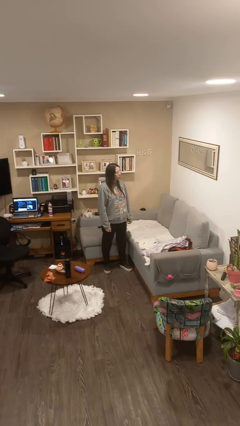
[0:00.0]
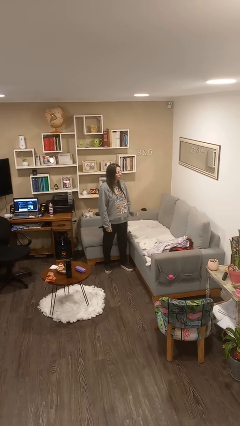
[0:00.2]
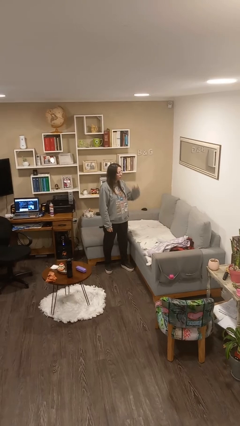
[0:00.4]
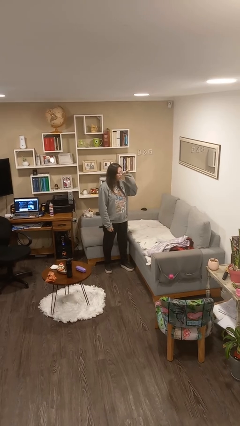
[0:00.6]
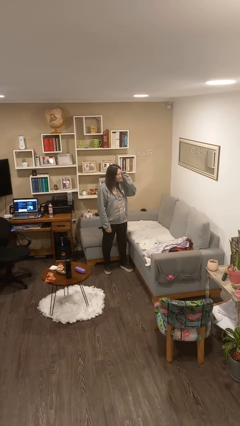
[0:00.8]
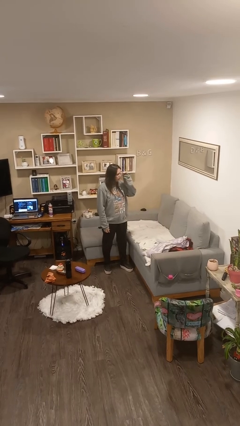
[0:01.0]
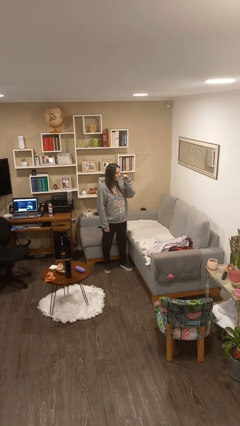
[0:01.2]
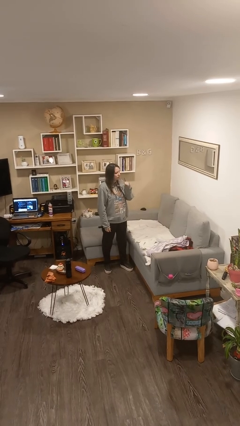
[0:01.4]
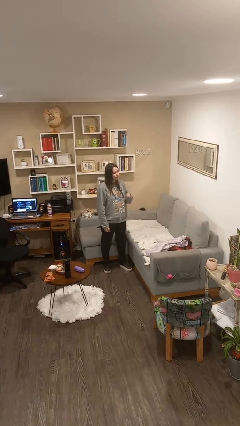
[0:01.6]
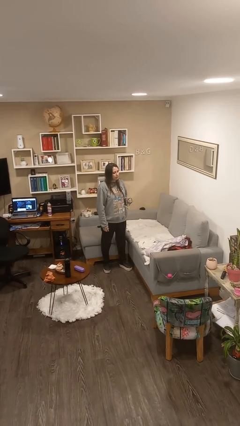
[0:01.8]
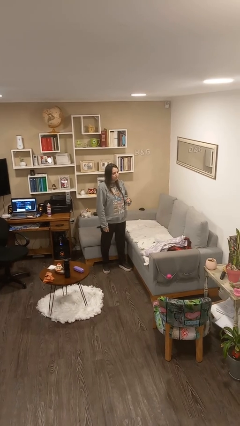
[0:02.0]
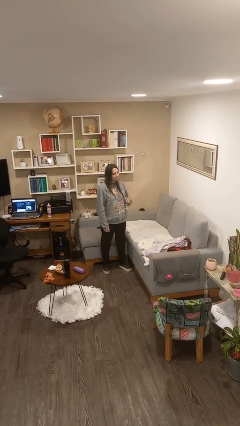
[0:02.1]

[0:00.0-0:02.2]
person takes off glasses

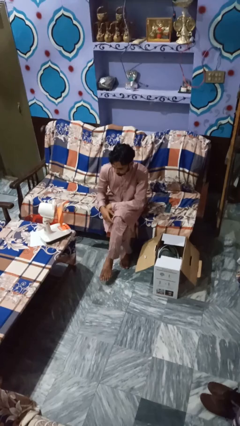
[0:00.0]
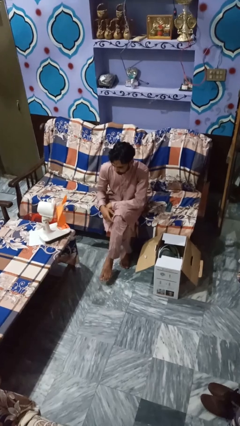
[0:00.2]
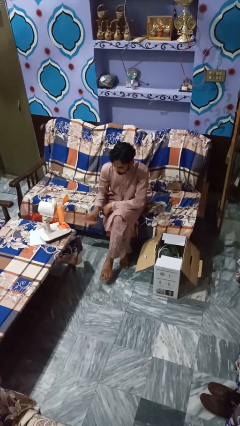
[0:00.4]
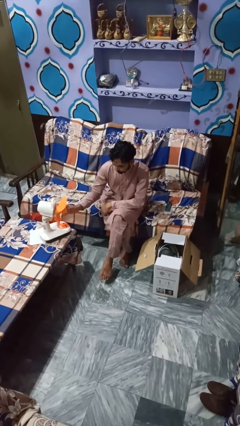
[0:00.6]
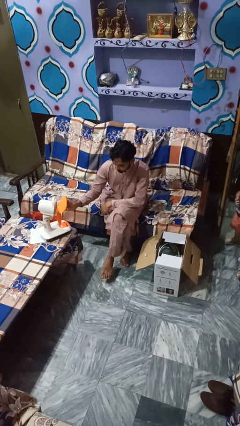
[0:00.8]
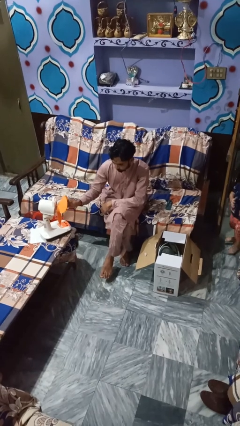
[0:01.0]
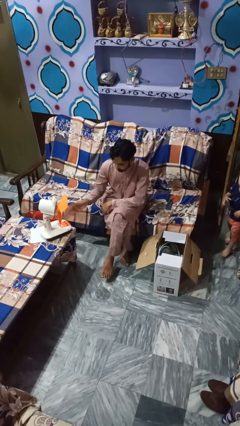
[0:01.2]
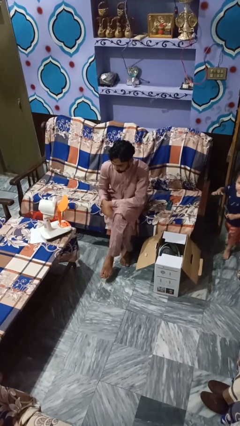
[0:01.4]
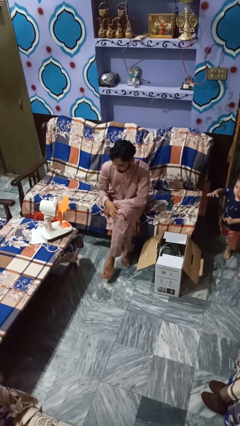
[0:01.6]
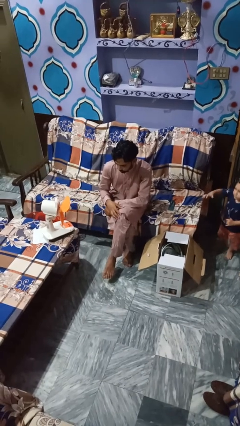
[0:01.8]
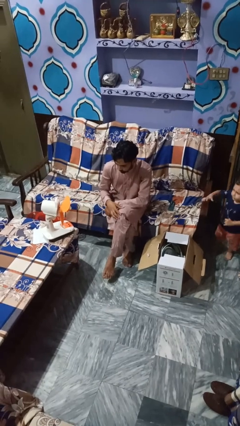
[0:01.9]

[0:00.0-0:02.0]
person turns off fan

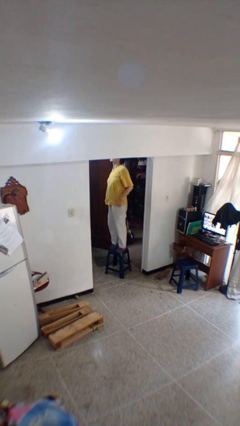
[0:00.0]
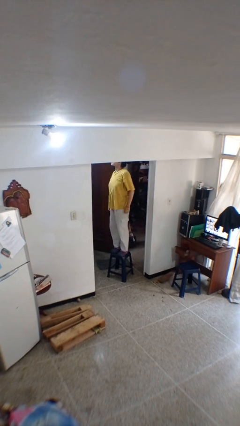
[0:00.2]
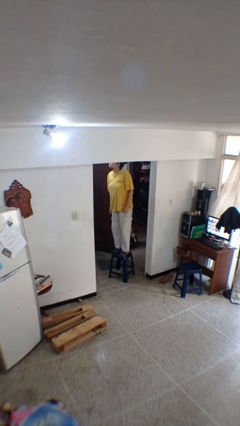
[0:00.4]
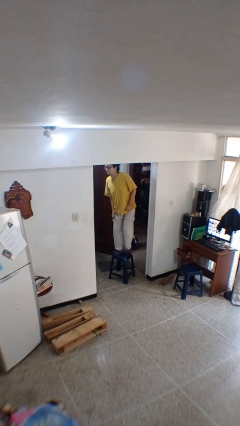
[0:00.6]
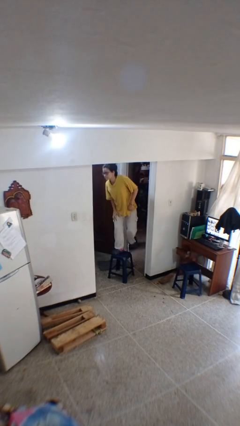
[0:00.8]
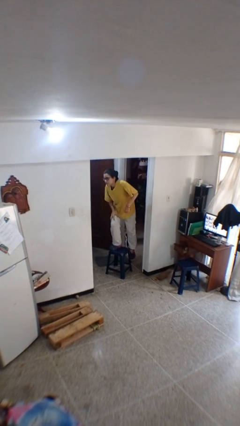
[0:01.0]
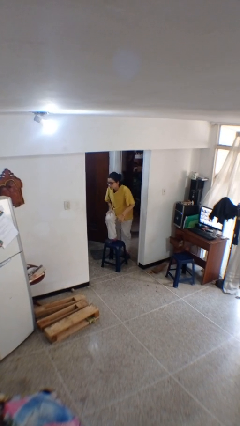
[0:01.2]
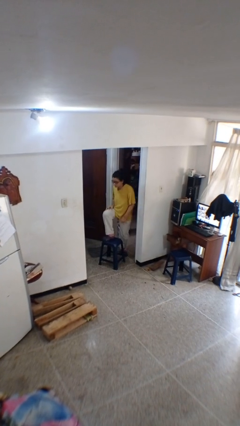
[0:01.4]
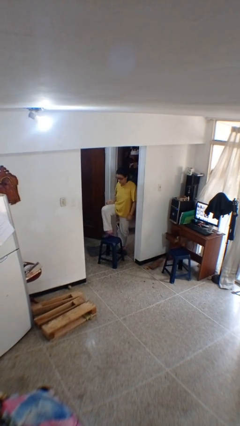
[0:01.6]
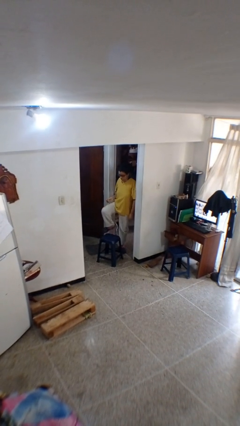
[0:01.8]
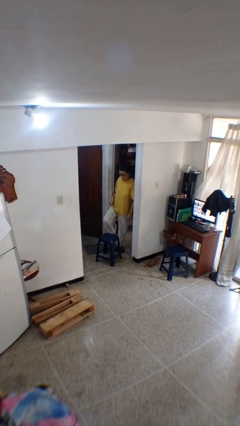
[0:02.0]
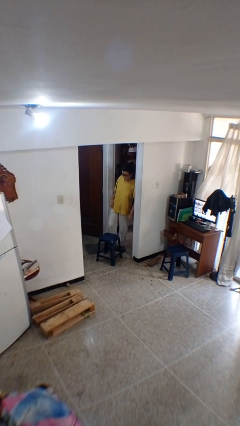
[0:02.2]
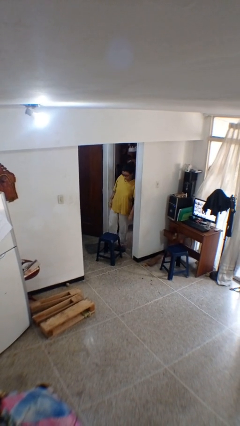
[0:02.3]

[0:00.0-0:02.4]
person climbs off chair

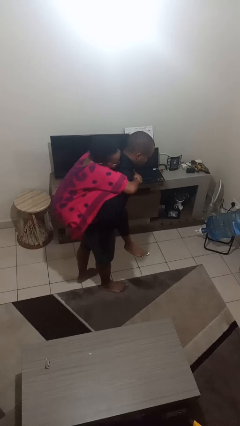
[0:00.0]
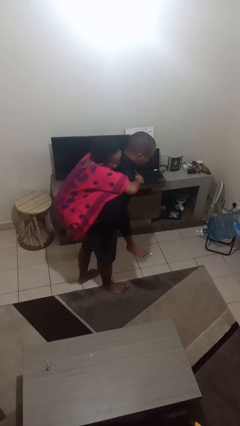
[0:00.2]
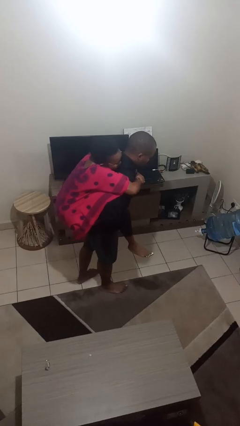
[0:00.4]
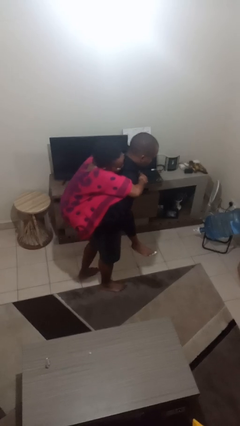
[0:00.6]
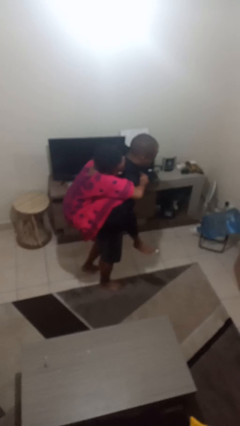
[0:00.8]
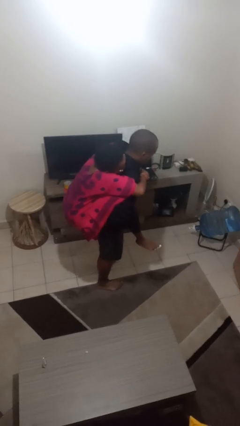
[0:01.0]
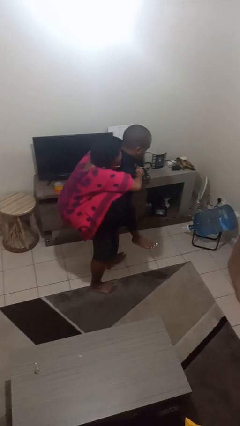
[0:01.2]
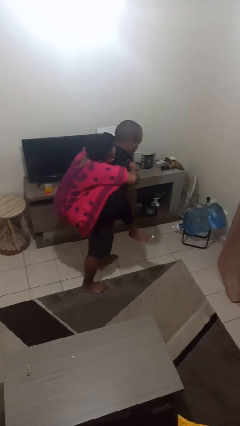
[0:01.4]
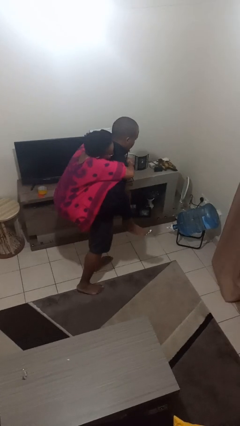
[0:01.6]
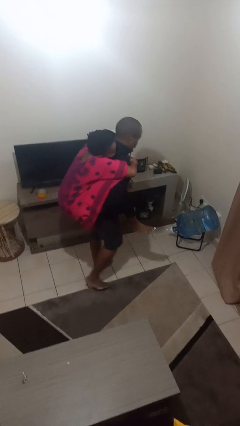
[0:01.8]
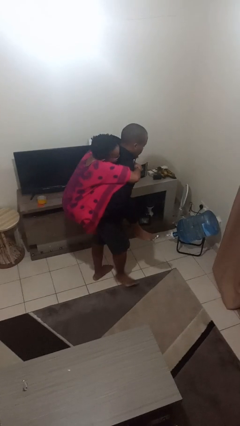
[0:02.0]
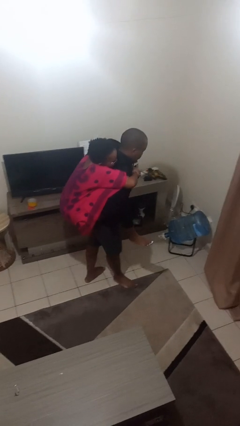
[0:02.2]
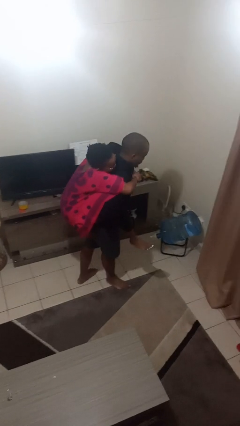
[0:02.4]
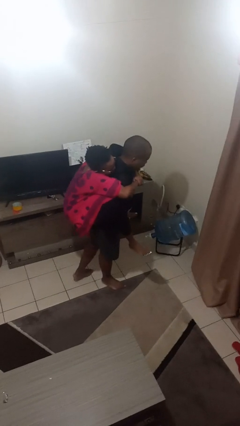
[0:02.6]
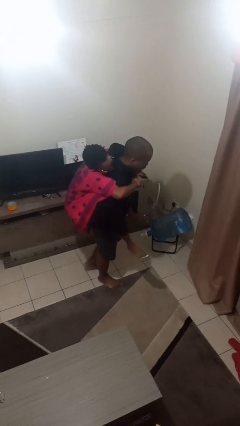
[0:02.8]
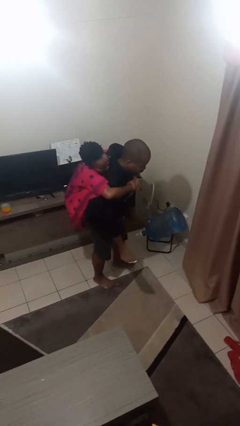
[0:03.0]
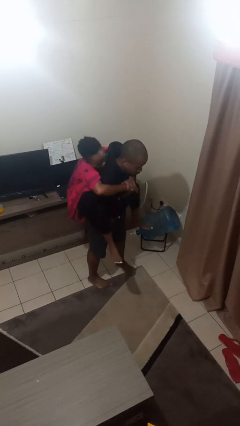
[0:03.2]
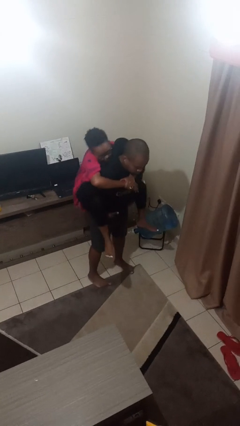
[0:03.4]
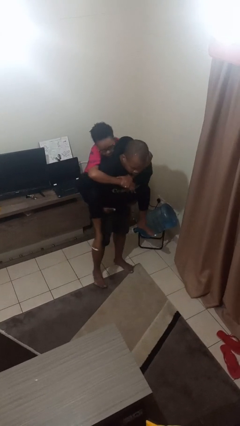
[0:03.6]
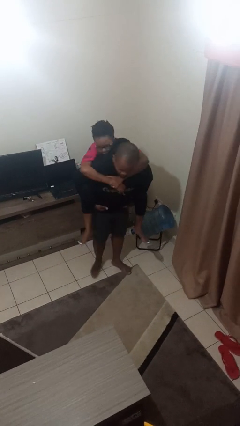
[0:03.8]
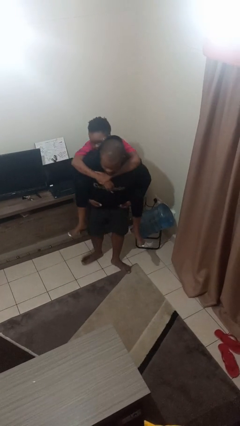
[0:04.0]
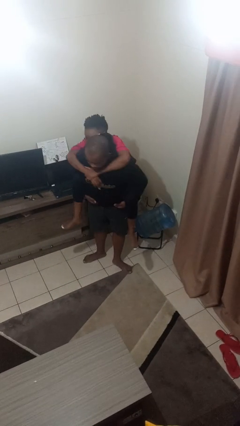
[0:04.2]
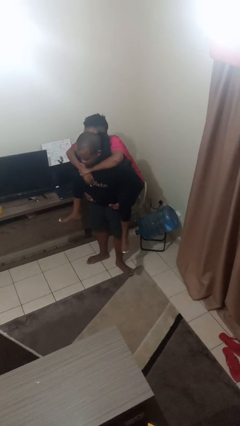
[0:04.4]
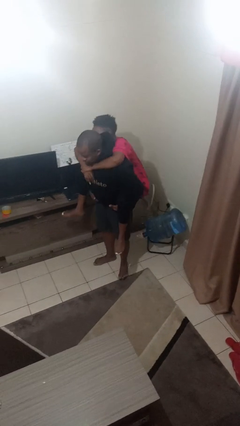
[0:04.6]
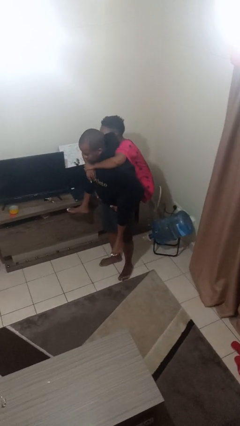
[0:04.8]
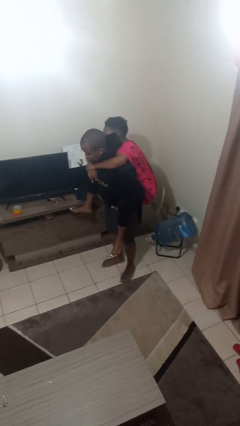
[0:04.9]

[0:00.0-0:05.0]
person carries person on back

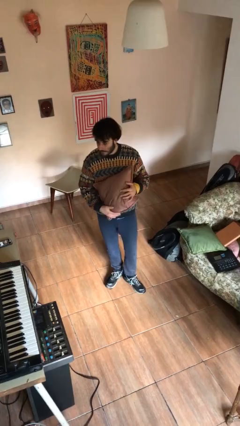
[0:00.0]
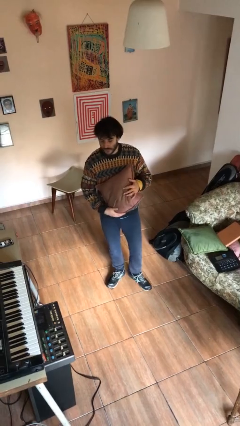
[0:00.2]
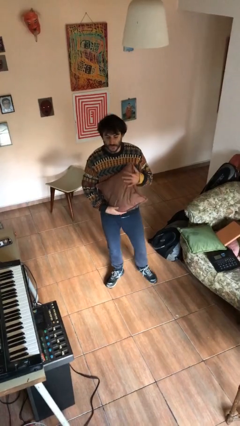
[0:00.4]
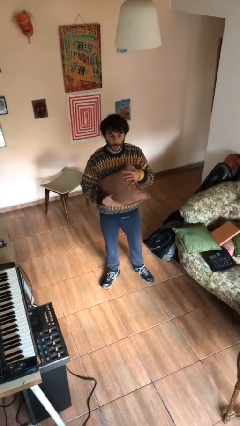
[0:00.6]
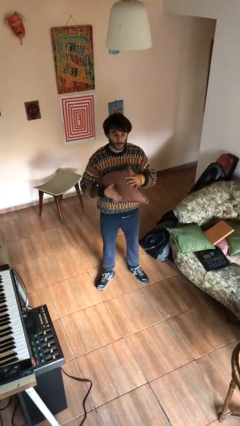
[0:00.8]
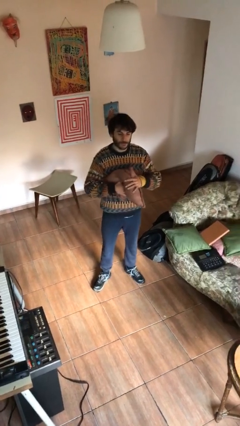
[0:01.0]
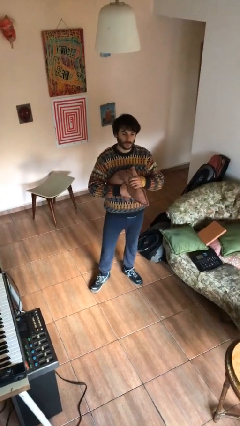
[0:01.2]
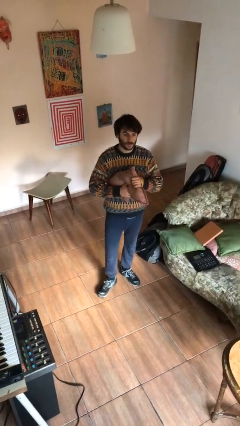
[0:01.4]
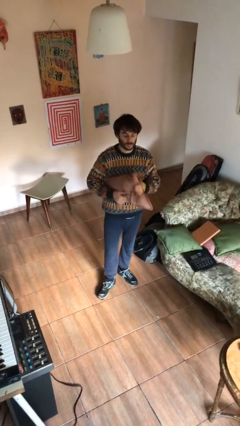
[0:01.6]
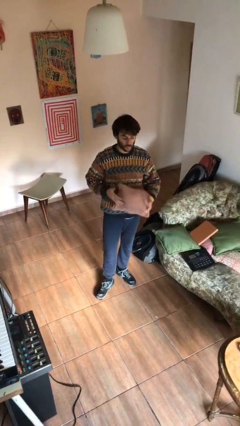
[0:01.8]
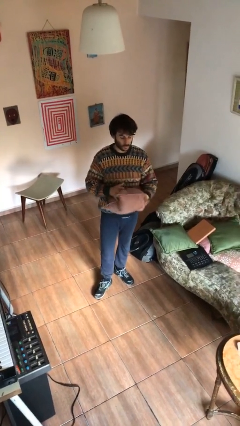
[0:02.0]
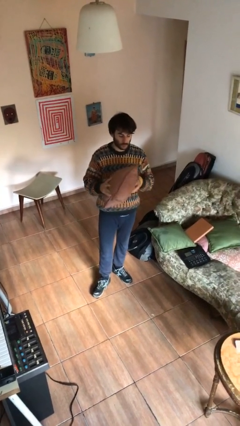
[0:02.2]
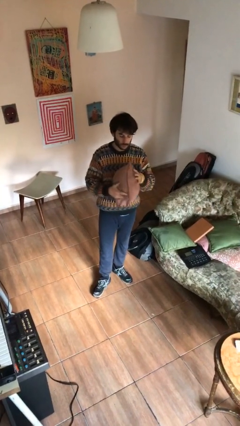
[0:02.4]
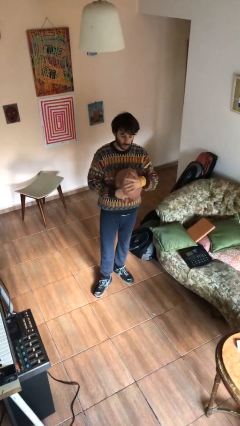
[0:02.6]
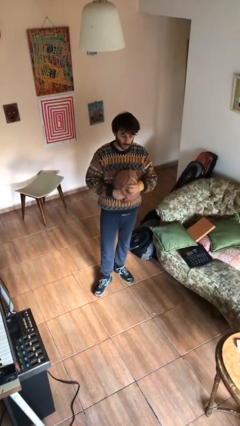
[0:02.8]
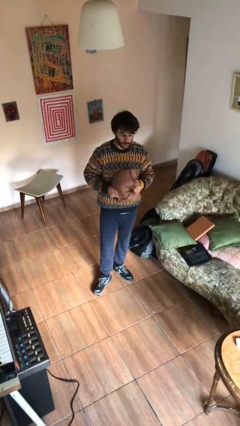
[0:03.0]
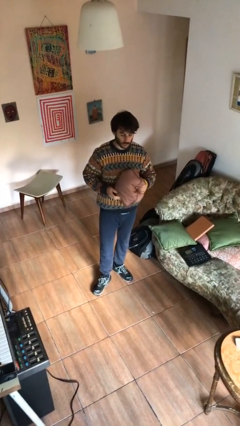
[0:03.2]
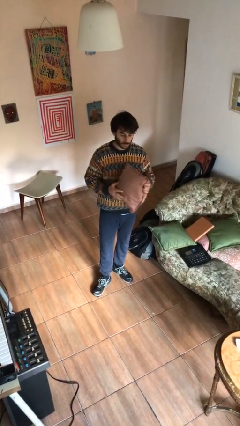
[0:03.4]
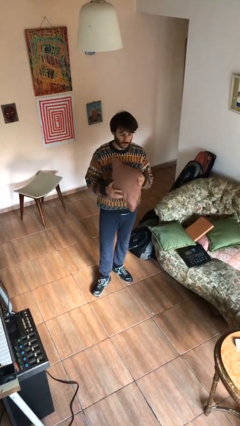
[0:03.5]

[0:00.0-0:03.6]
person squeezes object

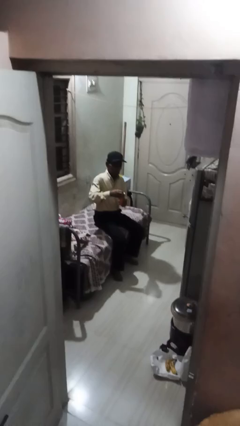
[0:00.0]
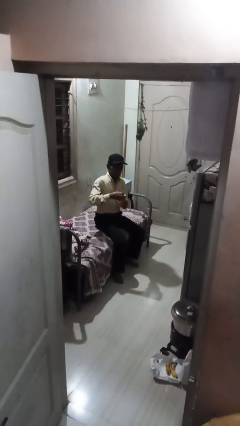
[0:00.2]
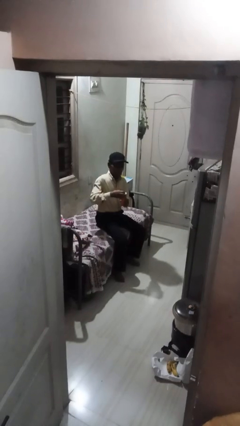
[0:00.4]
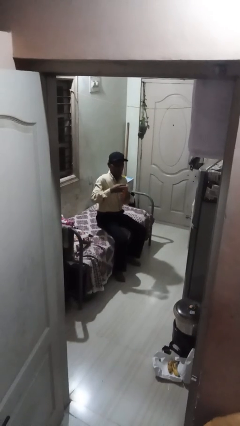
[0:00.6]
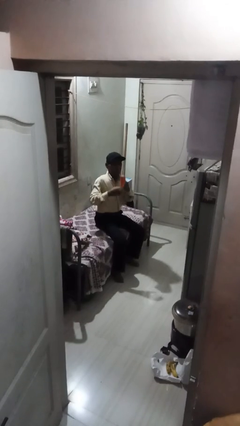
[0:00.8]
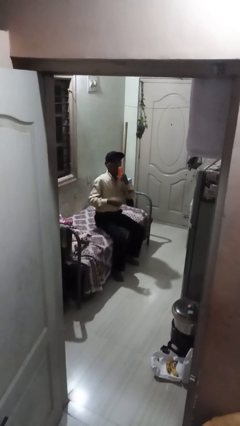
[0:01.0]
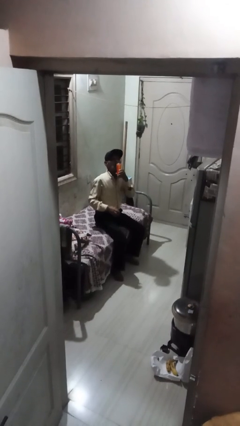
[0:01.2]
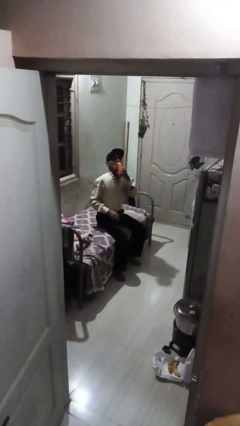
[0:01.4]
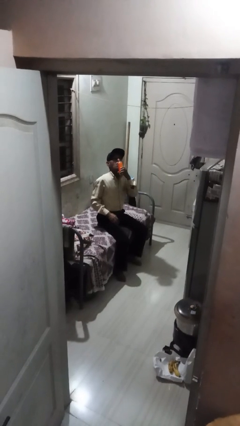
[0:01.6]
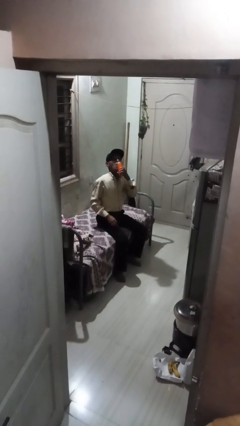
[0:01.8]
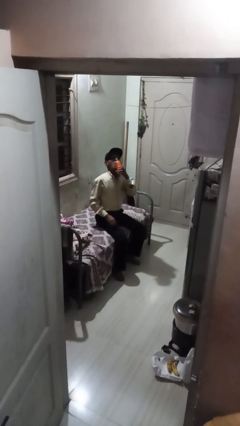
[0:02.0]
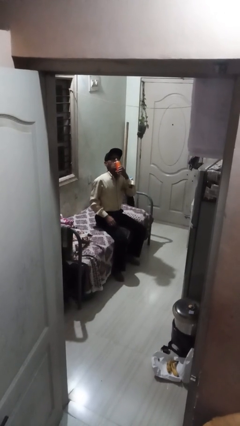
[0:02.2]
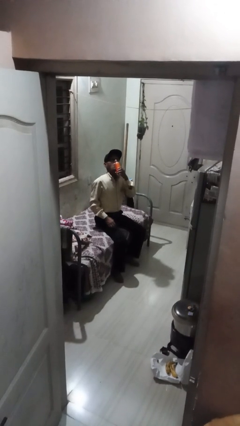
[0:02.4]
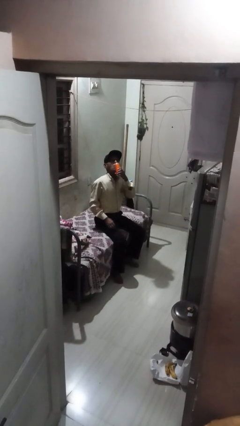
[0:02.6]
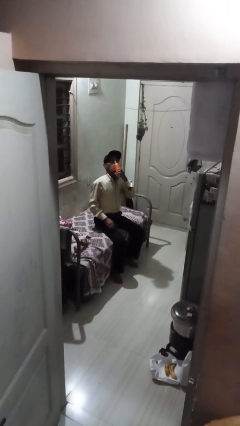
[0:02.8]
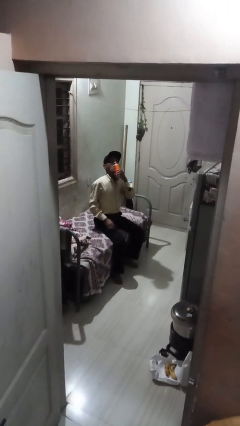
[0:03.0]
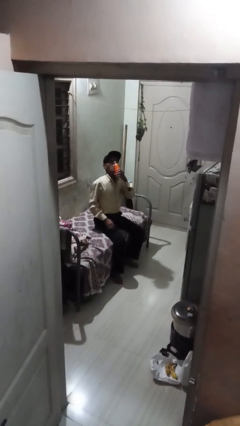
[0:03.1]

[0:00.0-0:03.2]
person drinks from beverage can
